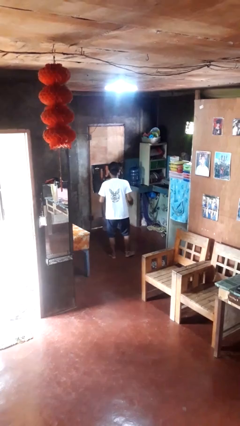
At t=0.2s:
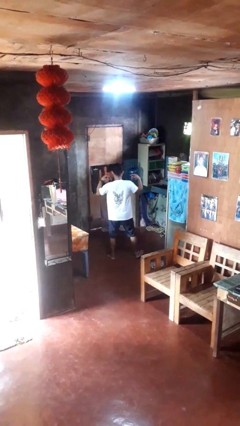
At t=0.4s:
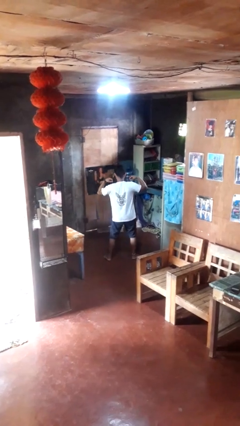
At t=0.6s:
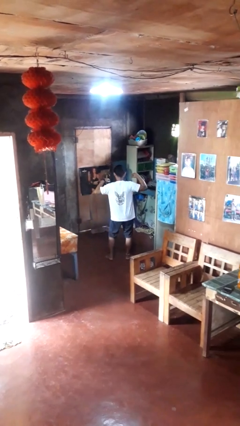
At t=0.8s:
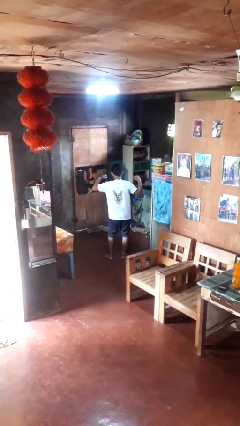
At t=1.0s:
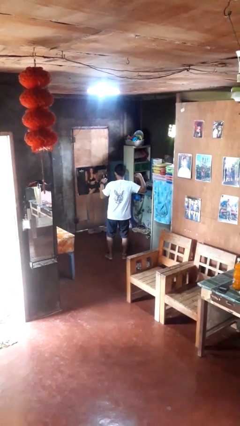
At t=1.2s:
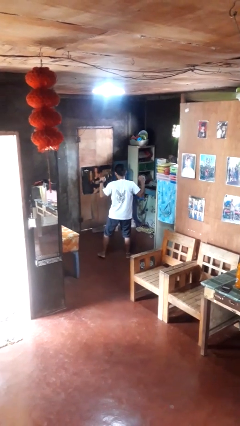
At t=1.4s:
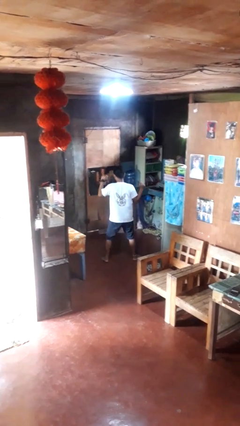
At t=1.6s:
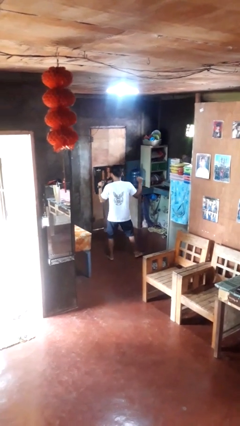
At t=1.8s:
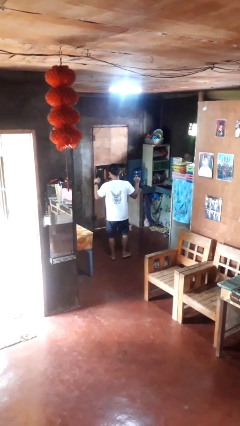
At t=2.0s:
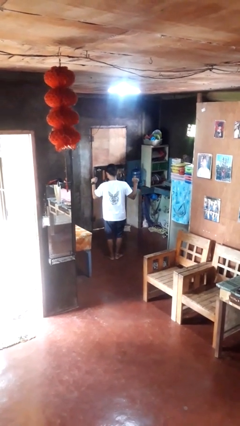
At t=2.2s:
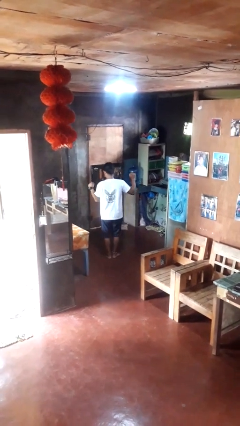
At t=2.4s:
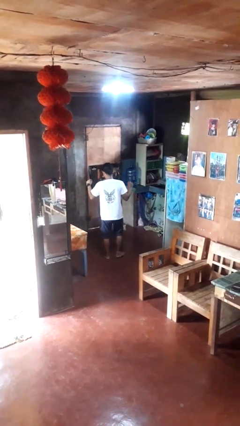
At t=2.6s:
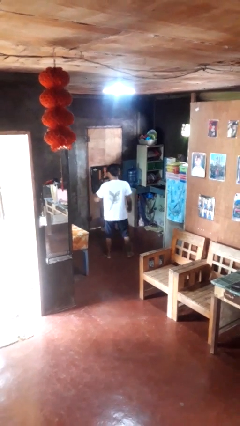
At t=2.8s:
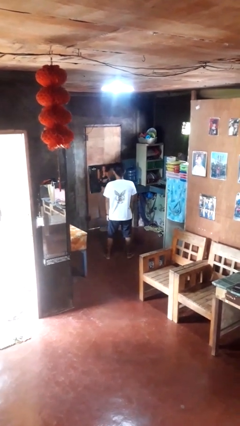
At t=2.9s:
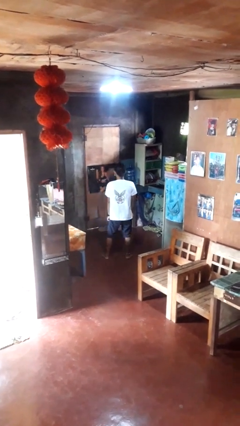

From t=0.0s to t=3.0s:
person dances in place

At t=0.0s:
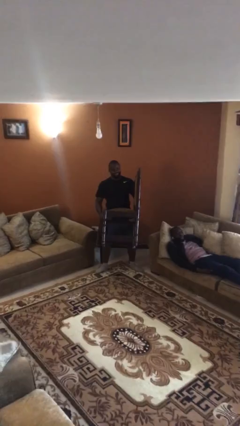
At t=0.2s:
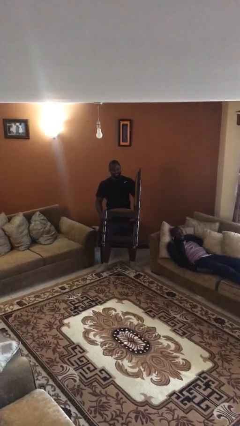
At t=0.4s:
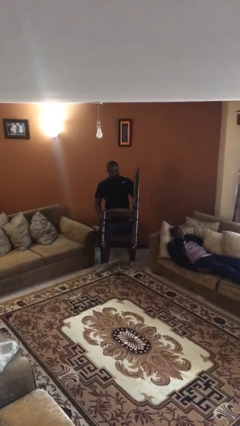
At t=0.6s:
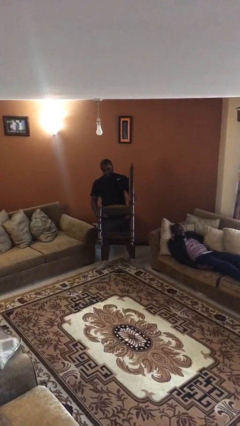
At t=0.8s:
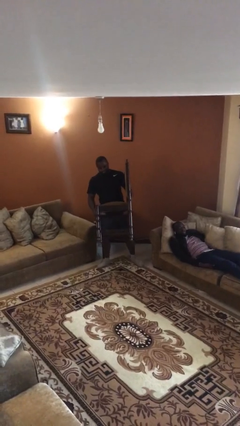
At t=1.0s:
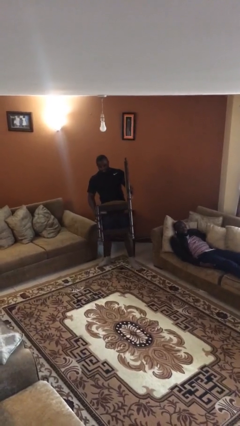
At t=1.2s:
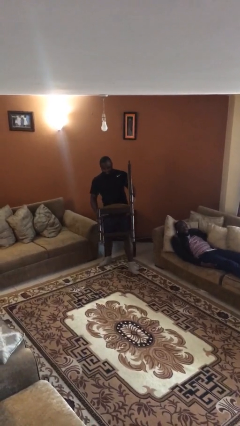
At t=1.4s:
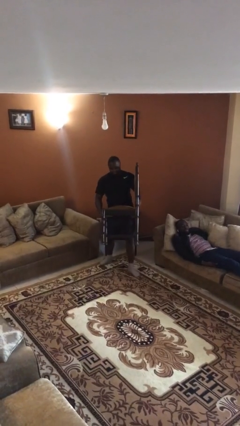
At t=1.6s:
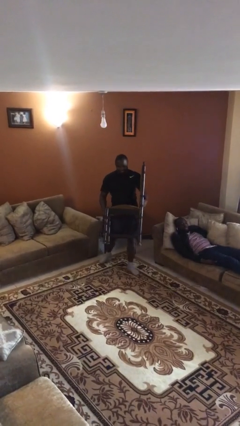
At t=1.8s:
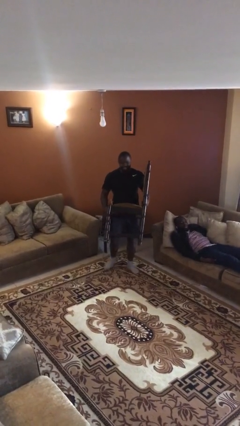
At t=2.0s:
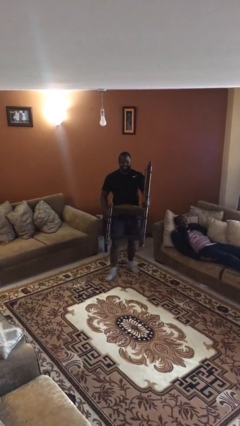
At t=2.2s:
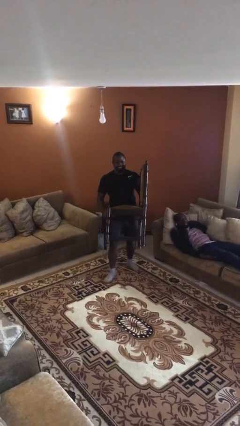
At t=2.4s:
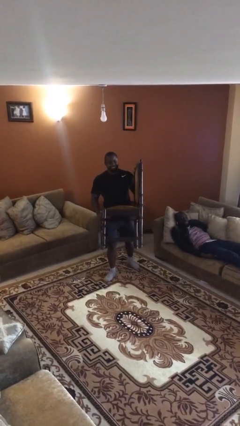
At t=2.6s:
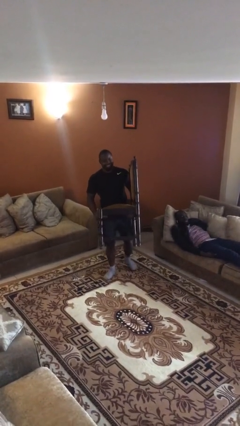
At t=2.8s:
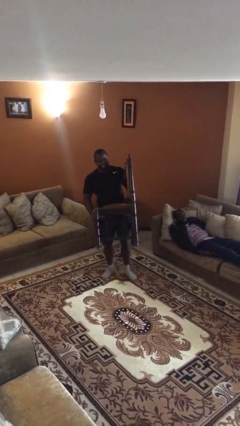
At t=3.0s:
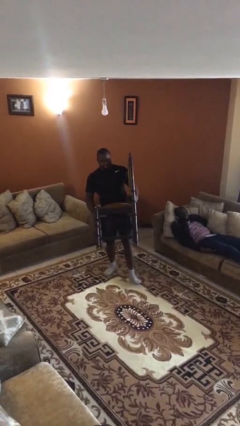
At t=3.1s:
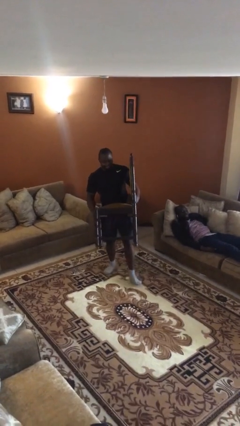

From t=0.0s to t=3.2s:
person carries heavy object

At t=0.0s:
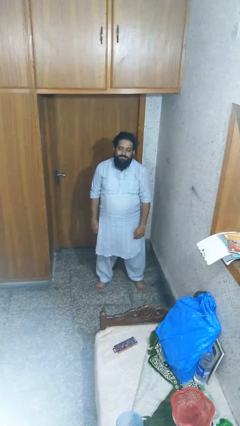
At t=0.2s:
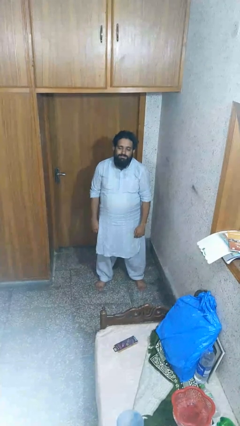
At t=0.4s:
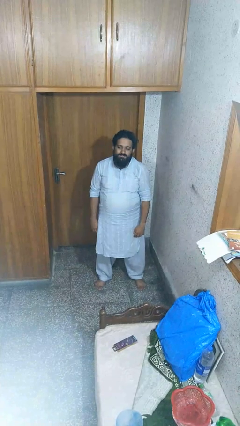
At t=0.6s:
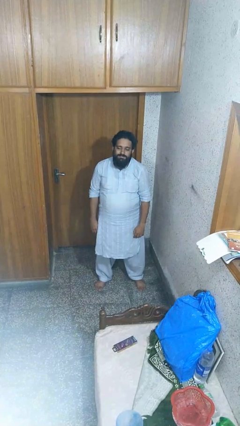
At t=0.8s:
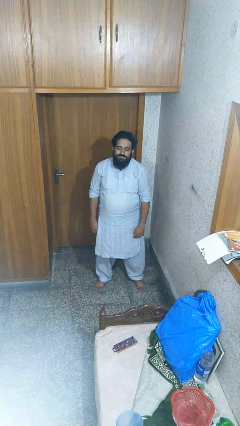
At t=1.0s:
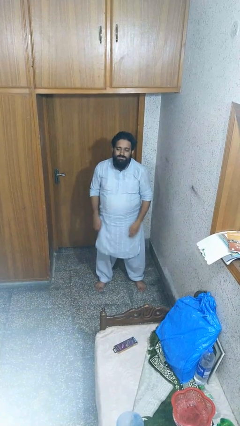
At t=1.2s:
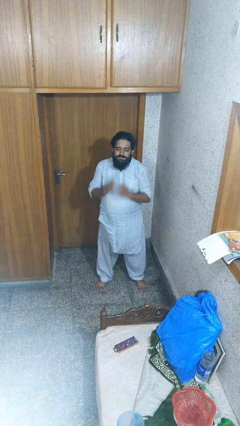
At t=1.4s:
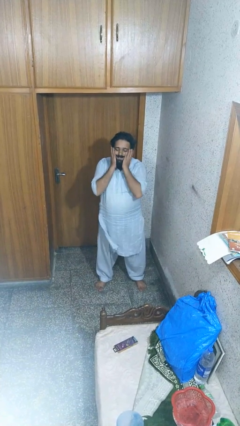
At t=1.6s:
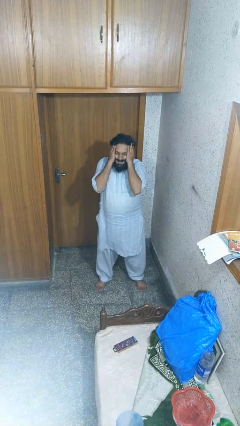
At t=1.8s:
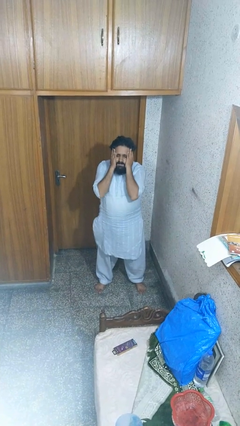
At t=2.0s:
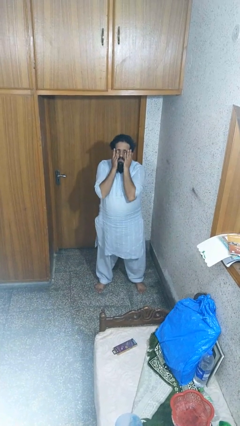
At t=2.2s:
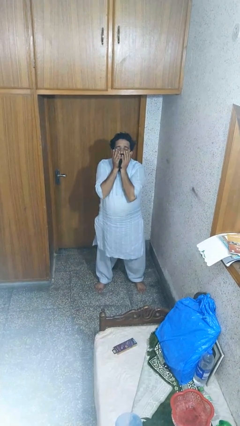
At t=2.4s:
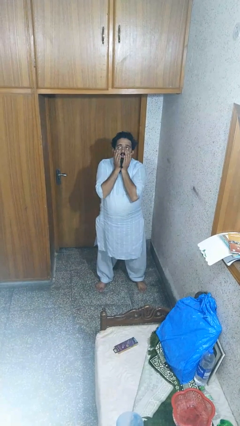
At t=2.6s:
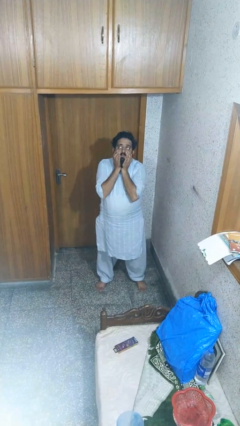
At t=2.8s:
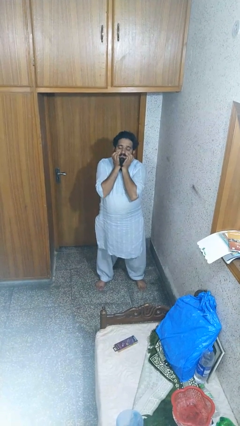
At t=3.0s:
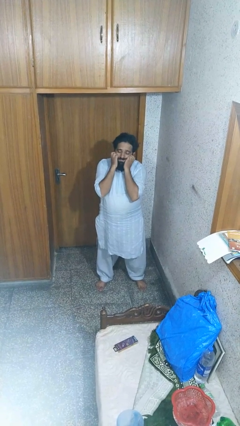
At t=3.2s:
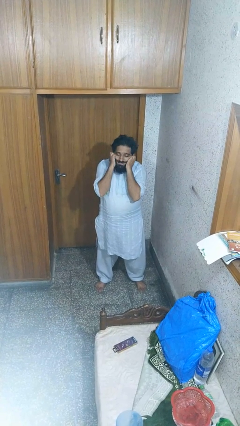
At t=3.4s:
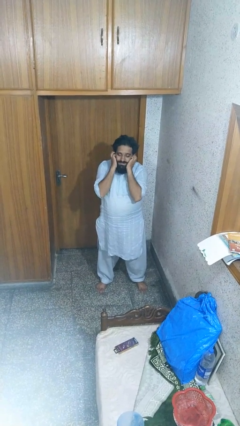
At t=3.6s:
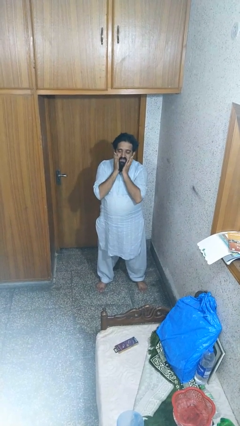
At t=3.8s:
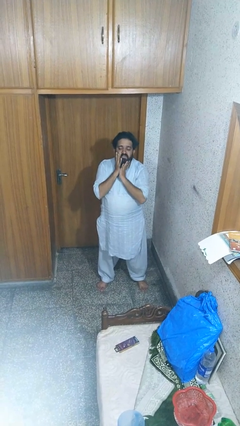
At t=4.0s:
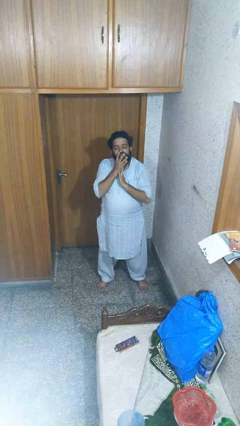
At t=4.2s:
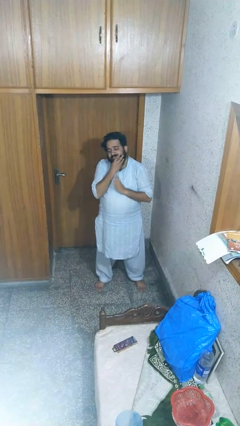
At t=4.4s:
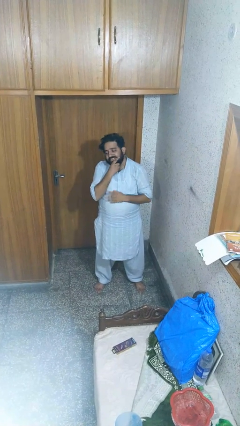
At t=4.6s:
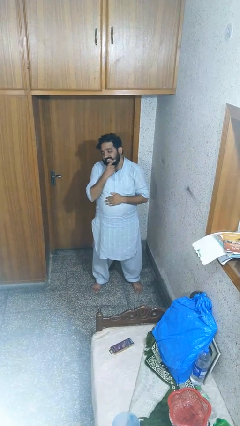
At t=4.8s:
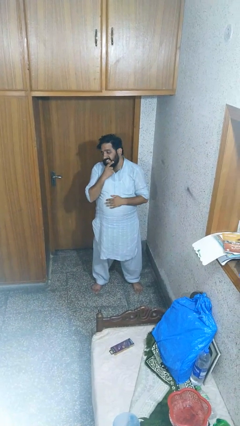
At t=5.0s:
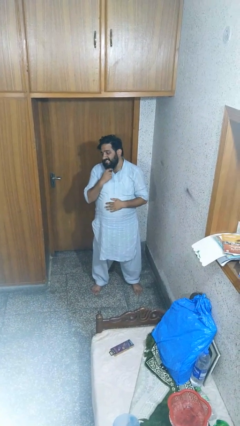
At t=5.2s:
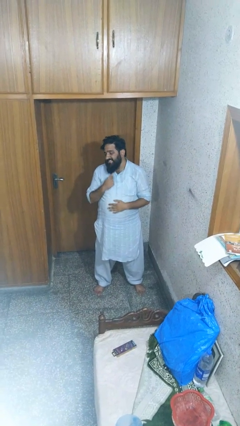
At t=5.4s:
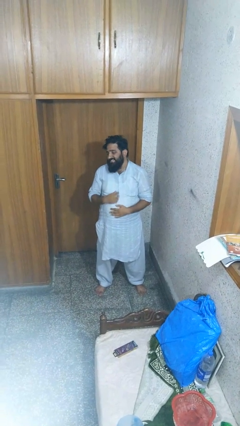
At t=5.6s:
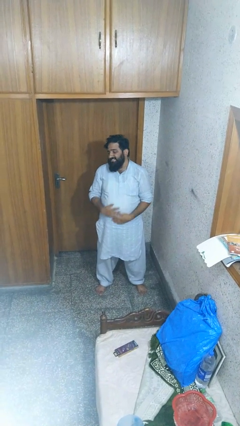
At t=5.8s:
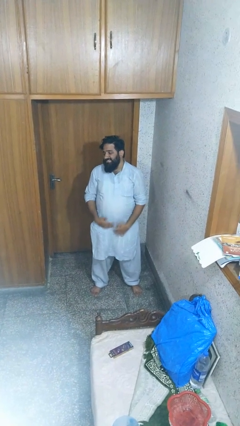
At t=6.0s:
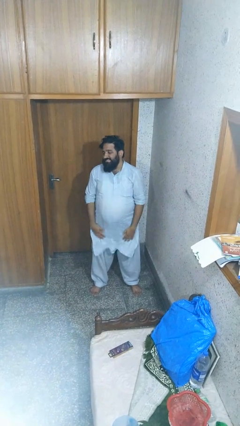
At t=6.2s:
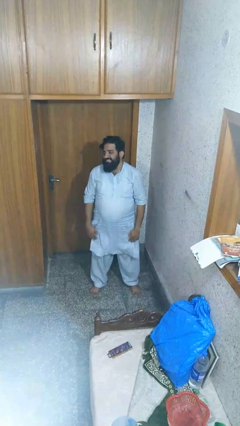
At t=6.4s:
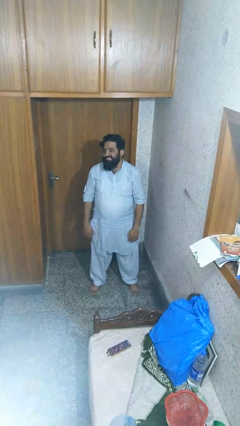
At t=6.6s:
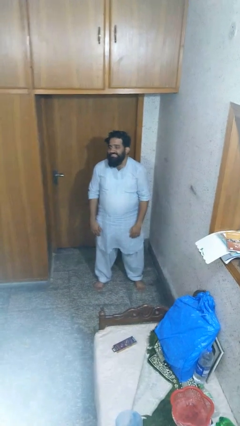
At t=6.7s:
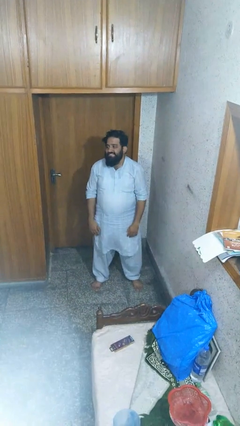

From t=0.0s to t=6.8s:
person scratches face

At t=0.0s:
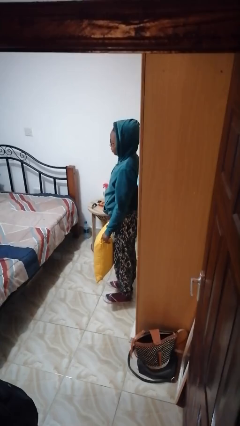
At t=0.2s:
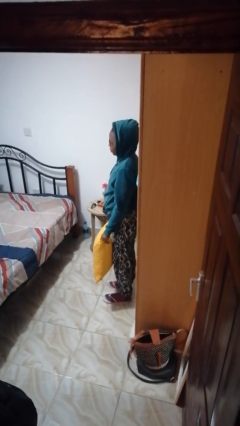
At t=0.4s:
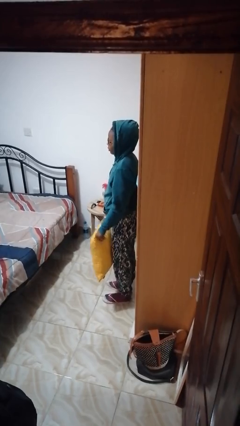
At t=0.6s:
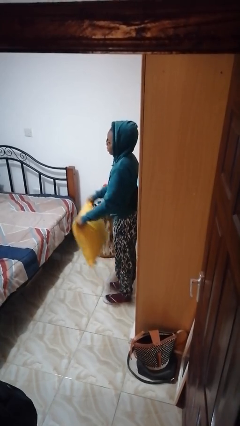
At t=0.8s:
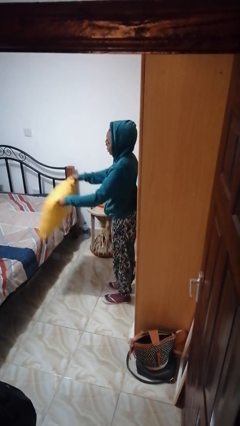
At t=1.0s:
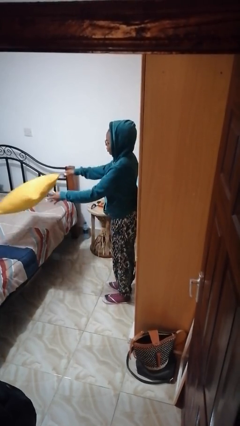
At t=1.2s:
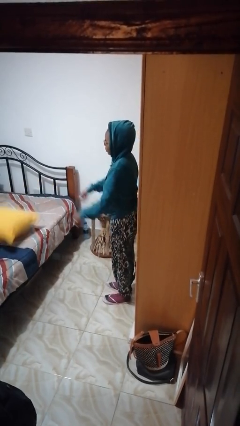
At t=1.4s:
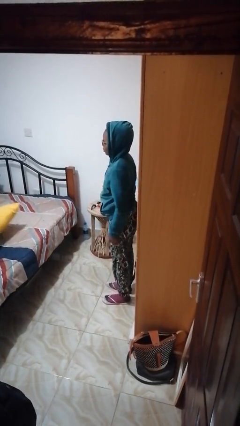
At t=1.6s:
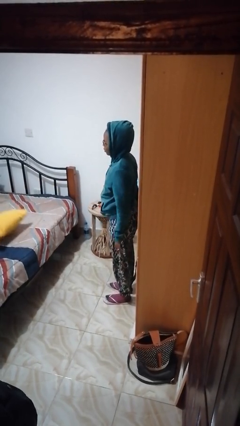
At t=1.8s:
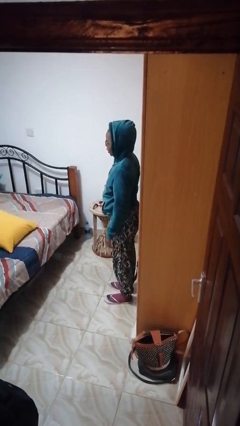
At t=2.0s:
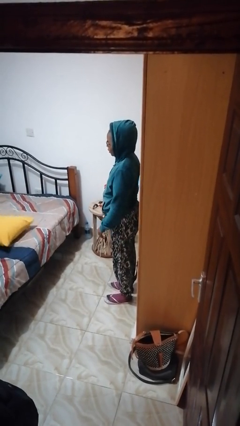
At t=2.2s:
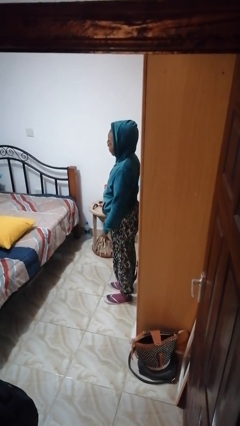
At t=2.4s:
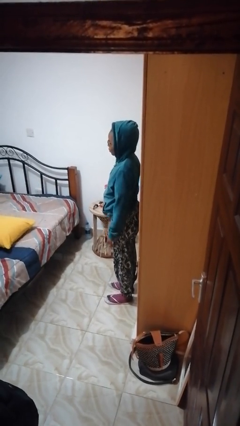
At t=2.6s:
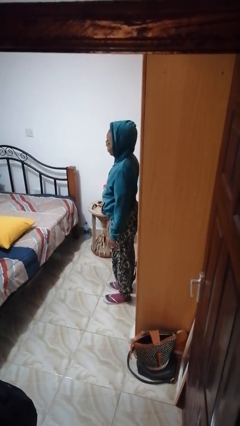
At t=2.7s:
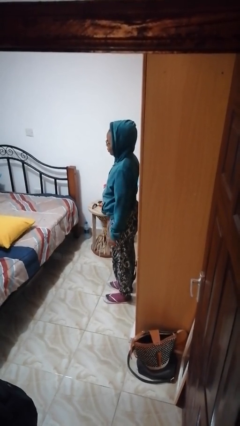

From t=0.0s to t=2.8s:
person throws object on bed

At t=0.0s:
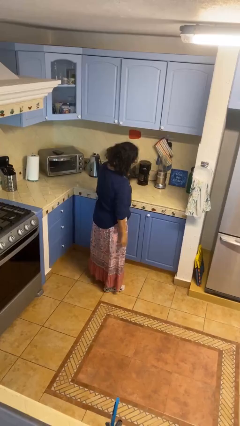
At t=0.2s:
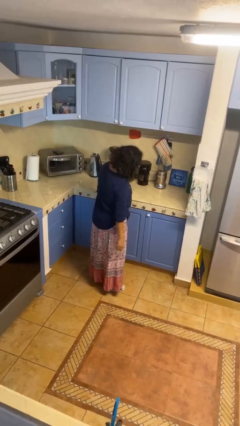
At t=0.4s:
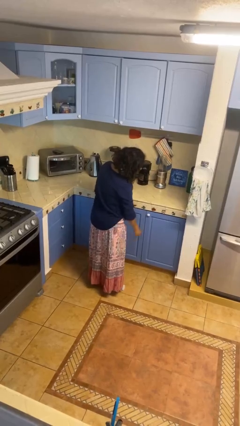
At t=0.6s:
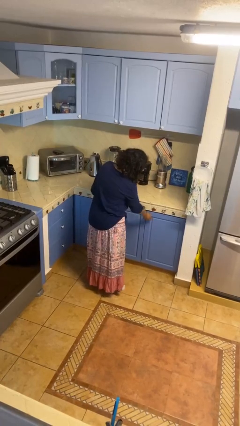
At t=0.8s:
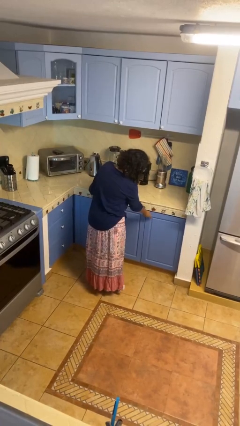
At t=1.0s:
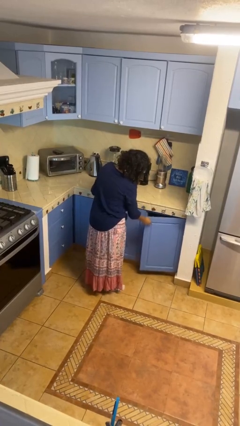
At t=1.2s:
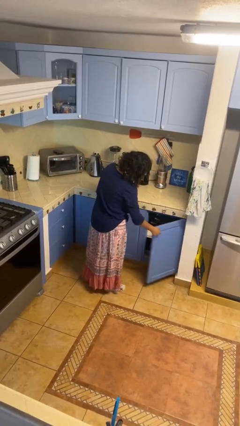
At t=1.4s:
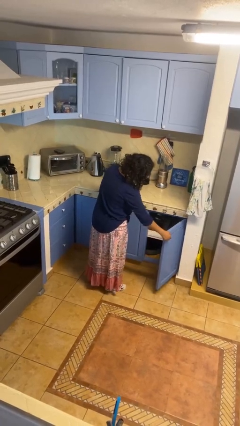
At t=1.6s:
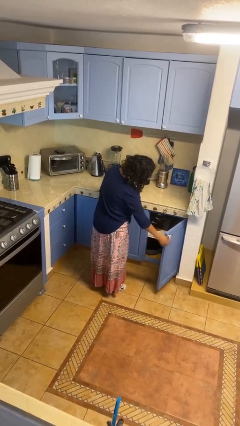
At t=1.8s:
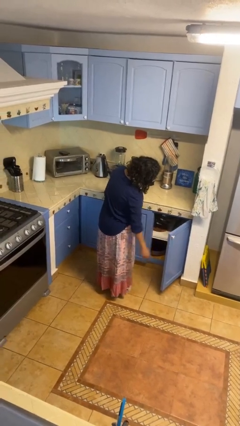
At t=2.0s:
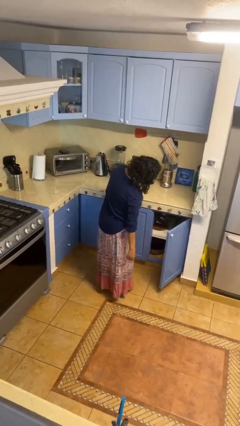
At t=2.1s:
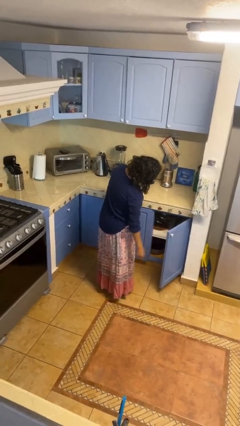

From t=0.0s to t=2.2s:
person opens cabinet
